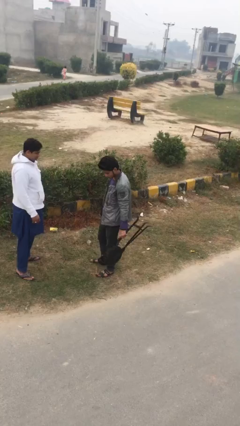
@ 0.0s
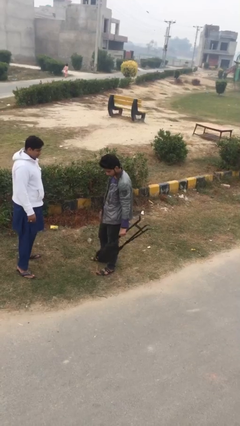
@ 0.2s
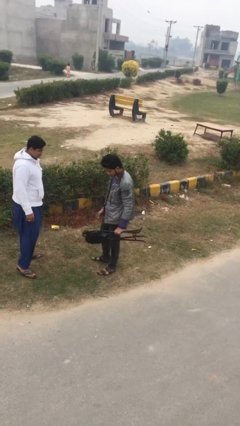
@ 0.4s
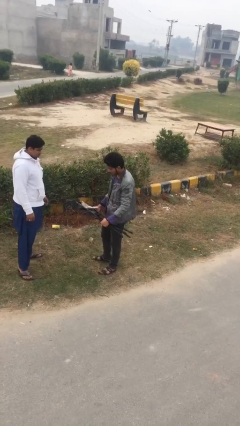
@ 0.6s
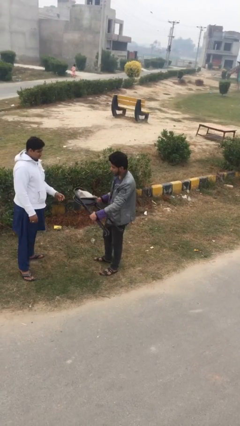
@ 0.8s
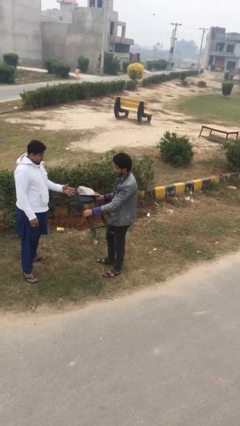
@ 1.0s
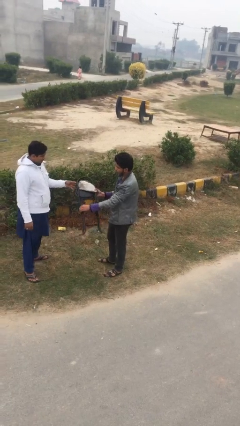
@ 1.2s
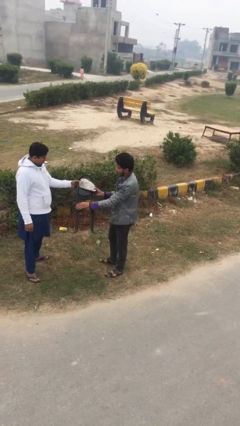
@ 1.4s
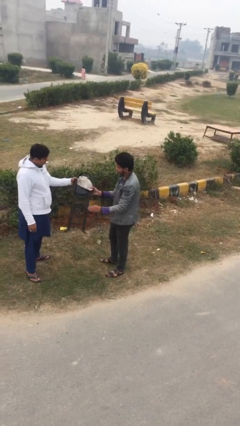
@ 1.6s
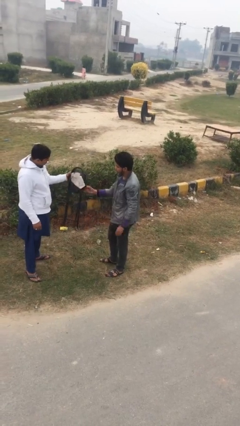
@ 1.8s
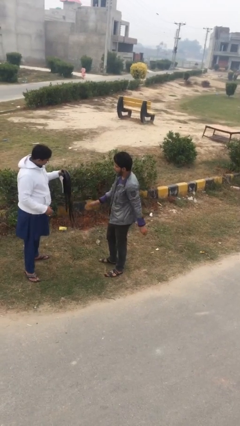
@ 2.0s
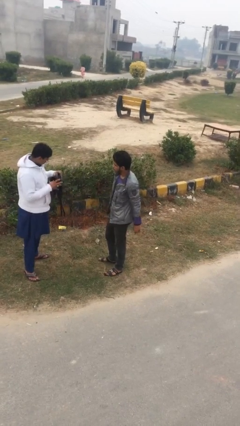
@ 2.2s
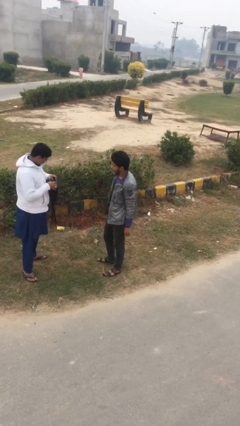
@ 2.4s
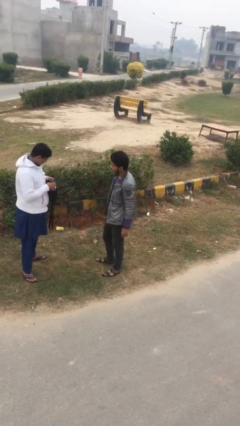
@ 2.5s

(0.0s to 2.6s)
person transfers object to person

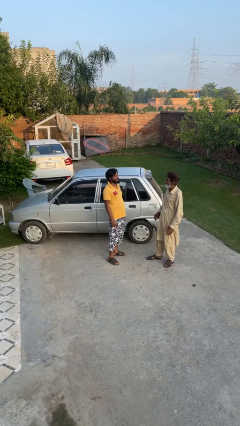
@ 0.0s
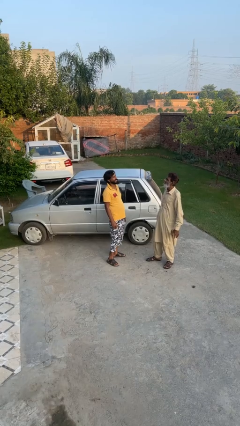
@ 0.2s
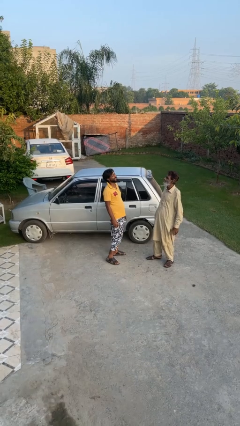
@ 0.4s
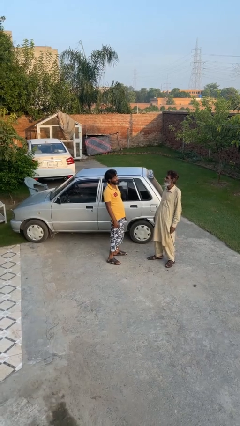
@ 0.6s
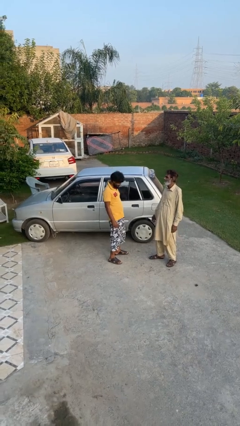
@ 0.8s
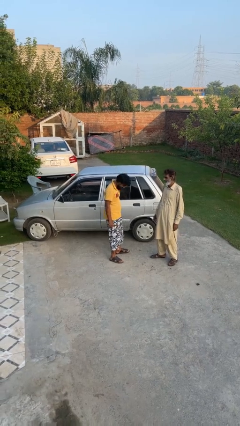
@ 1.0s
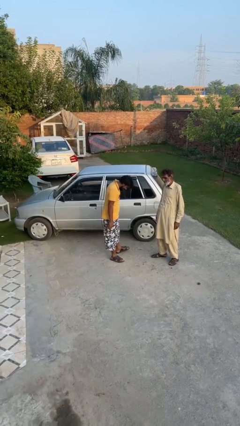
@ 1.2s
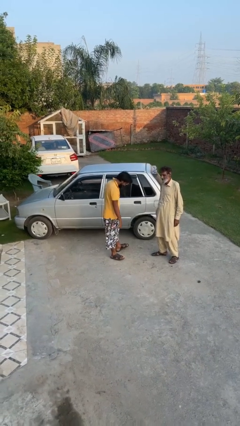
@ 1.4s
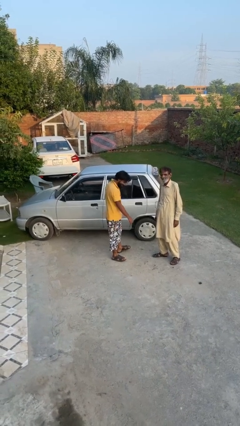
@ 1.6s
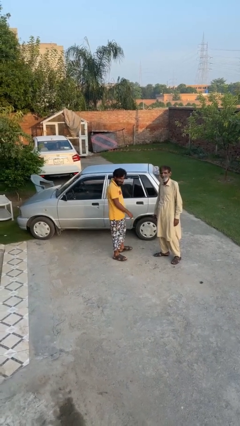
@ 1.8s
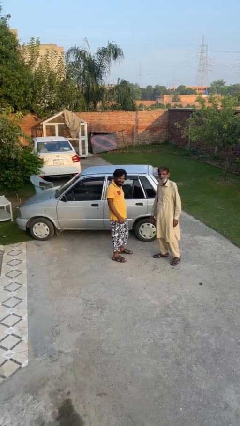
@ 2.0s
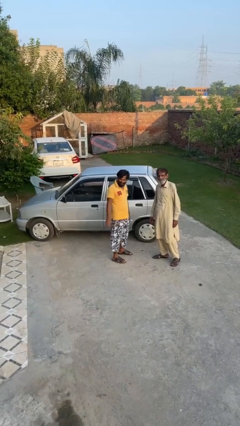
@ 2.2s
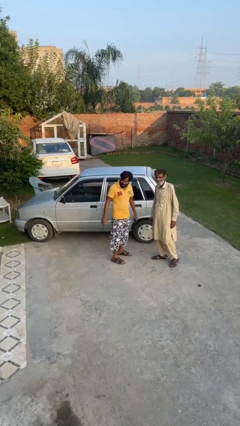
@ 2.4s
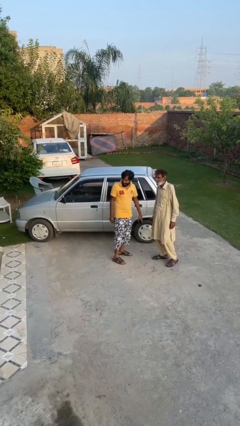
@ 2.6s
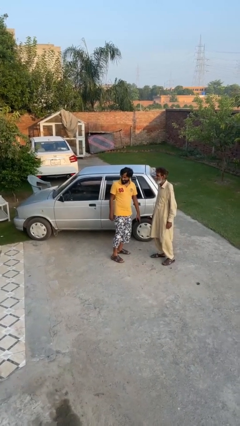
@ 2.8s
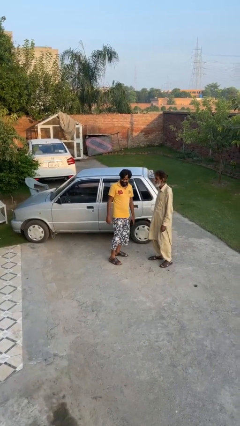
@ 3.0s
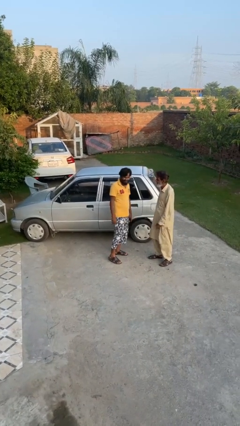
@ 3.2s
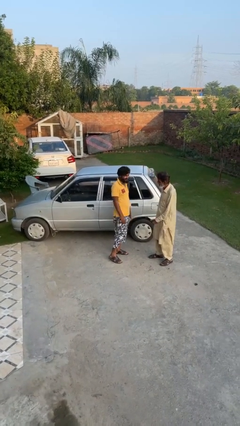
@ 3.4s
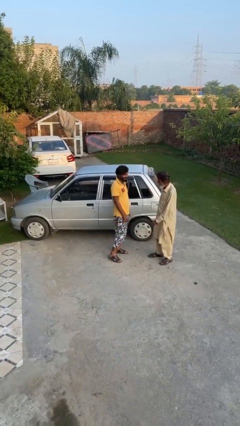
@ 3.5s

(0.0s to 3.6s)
person laughs with person

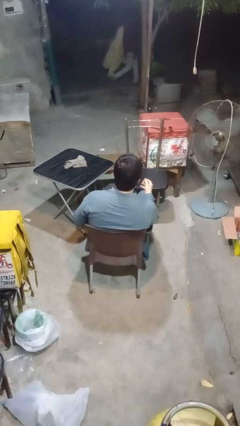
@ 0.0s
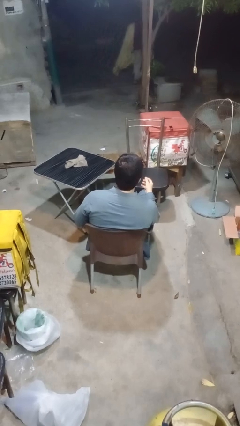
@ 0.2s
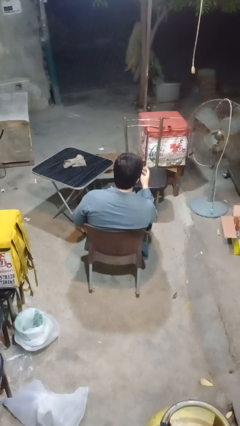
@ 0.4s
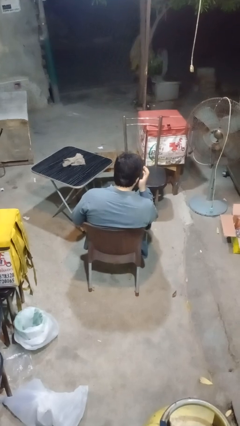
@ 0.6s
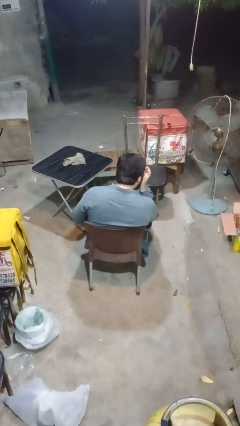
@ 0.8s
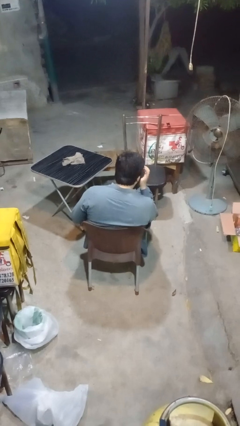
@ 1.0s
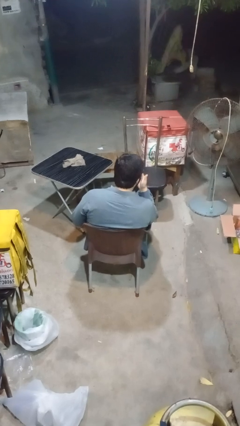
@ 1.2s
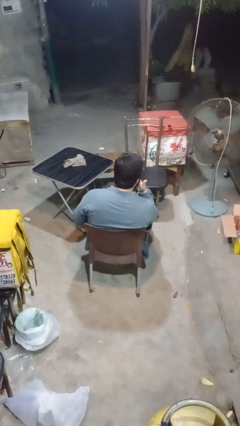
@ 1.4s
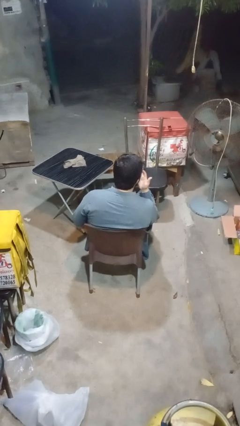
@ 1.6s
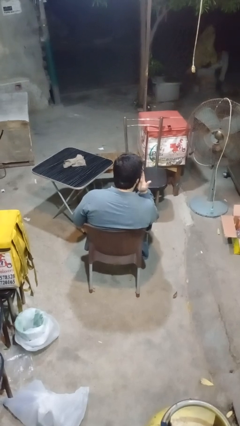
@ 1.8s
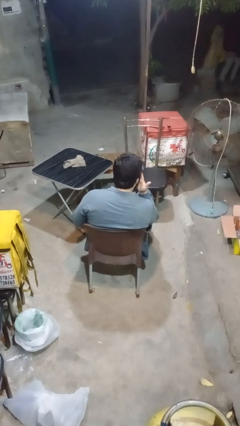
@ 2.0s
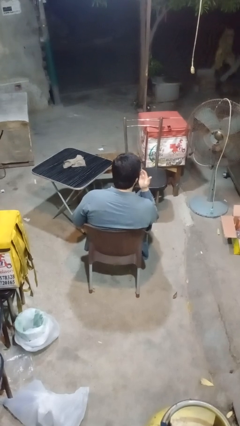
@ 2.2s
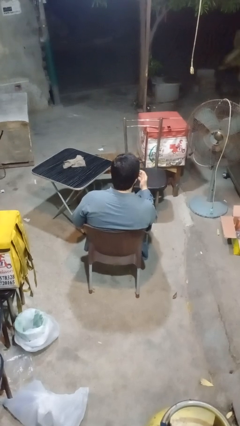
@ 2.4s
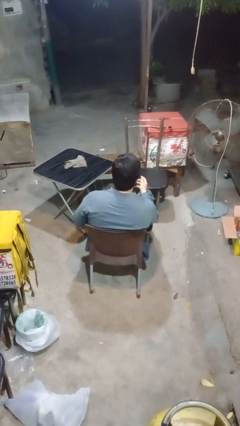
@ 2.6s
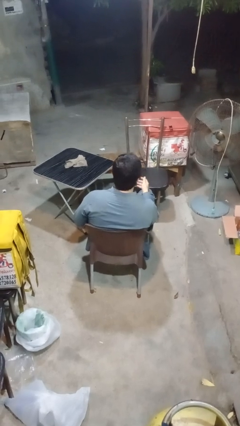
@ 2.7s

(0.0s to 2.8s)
person licks fingers

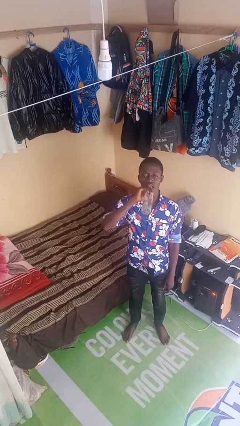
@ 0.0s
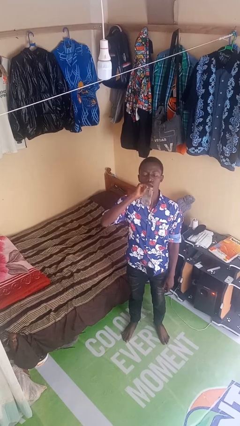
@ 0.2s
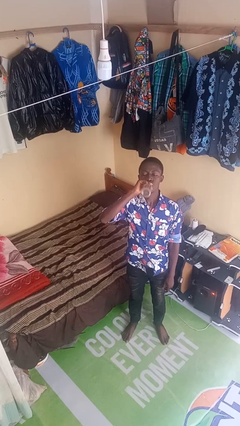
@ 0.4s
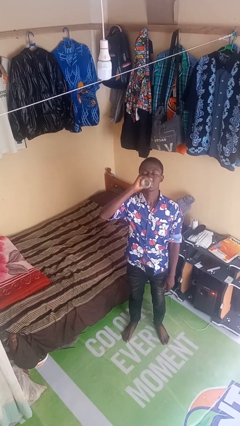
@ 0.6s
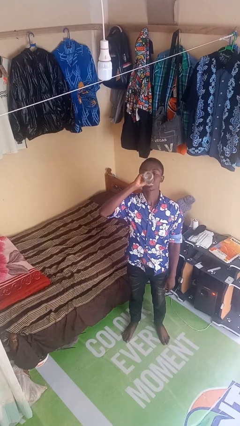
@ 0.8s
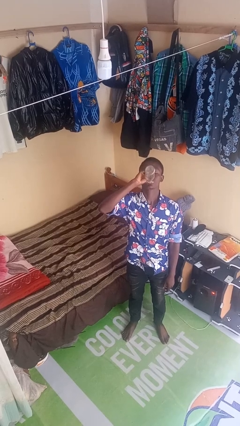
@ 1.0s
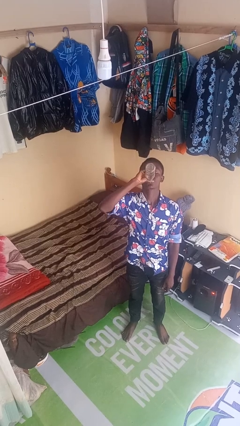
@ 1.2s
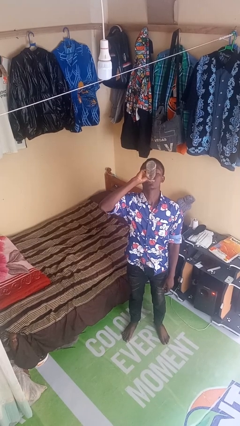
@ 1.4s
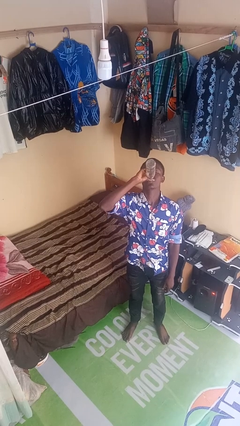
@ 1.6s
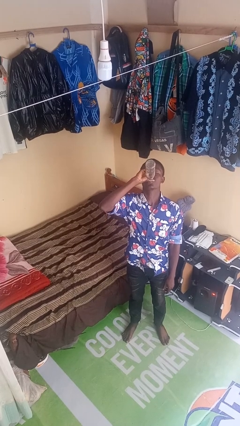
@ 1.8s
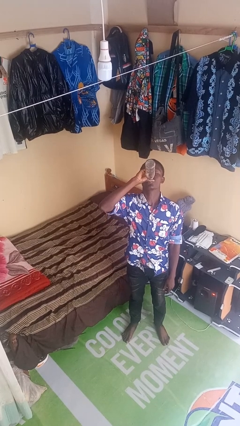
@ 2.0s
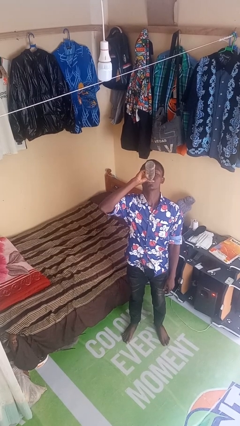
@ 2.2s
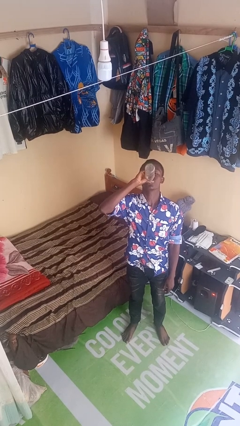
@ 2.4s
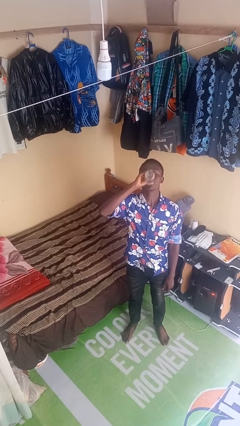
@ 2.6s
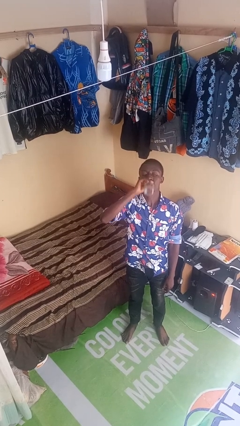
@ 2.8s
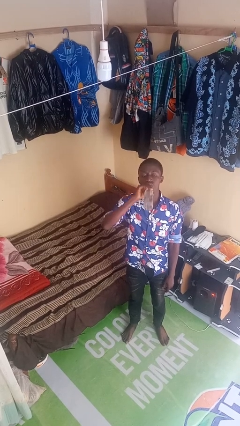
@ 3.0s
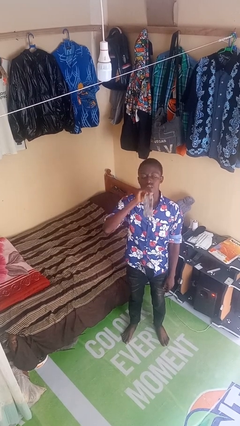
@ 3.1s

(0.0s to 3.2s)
person drinks from bottle

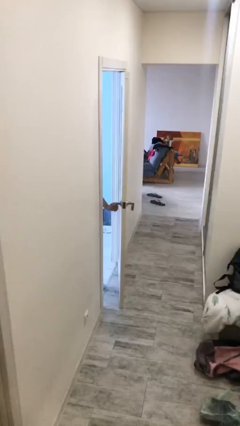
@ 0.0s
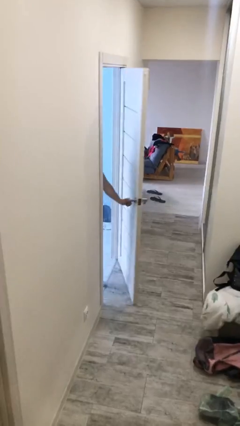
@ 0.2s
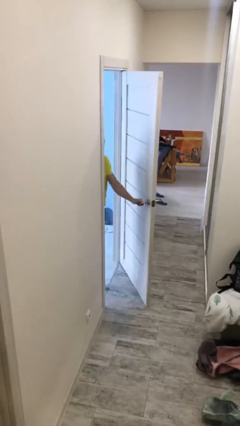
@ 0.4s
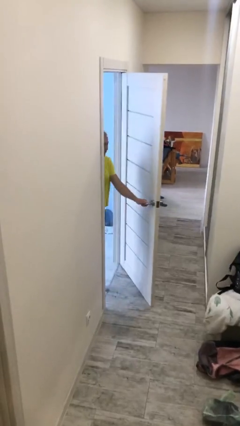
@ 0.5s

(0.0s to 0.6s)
person opens facility door

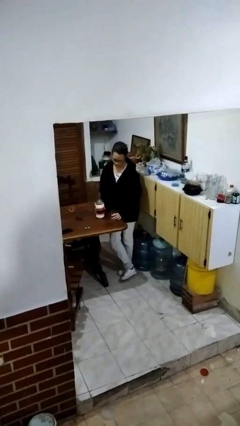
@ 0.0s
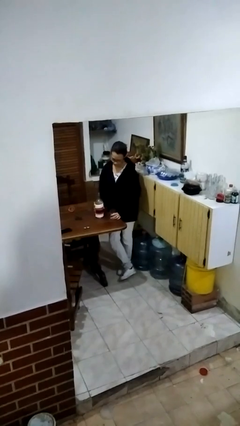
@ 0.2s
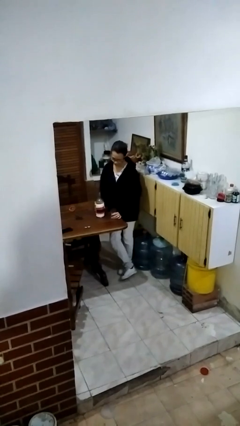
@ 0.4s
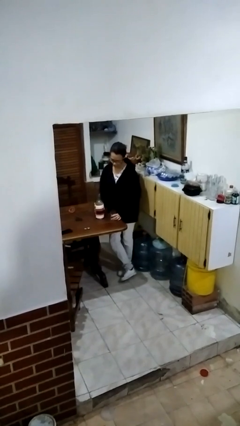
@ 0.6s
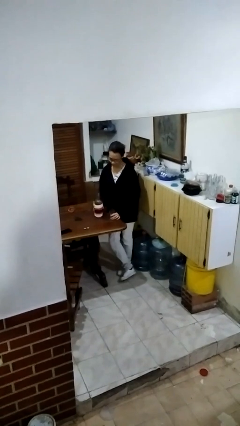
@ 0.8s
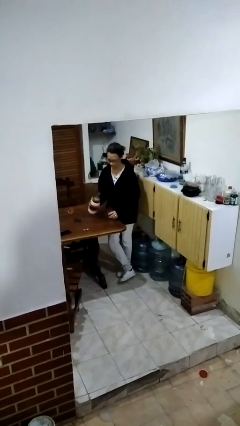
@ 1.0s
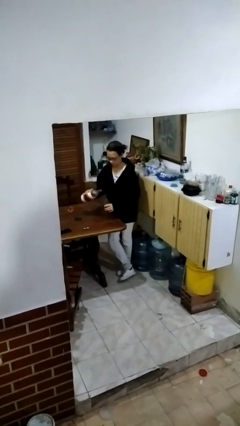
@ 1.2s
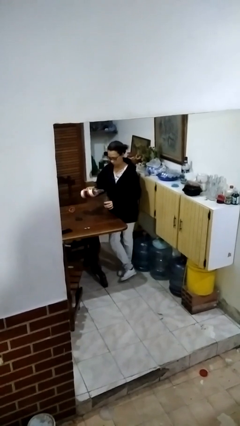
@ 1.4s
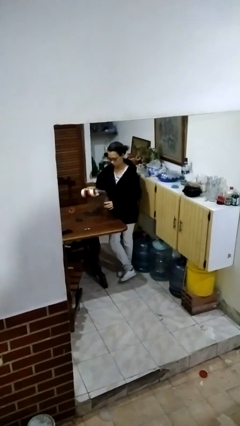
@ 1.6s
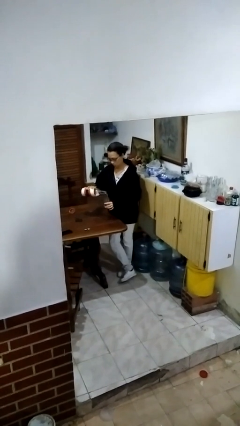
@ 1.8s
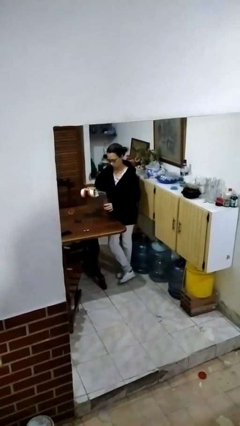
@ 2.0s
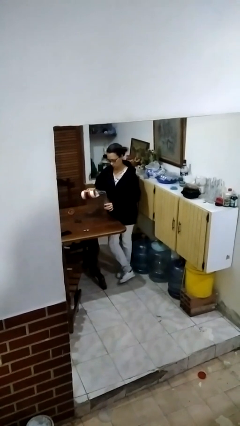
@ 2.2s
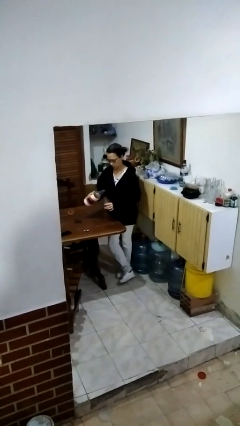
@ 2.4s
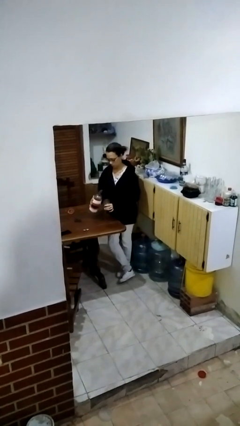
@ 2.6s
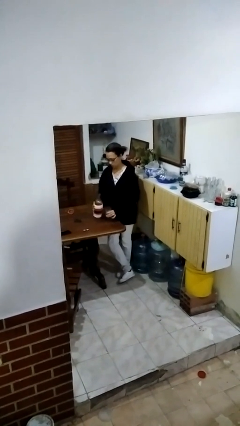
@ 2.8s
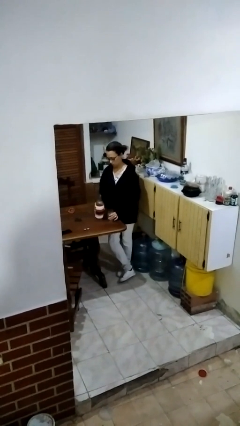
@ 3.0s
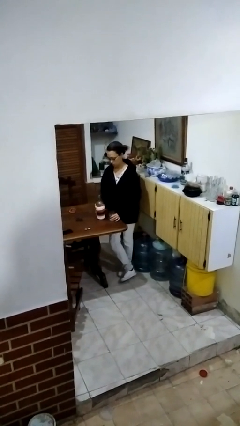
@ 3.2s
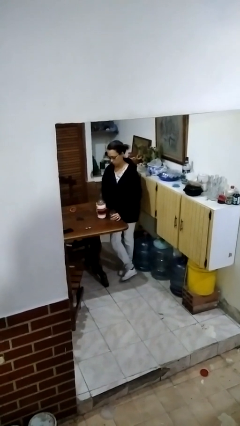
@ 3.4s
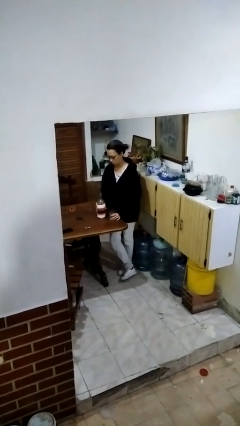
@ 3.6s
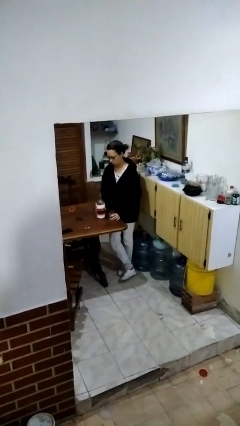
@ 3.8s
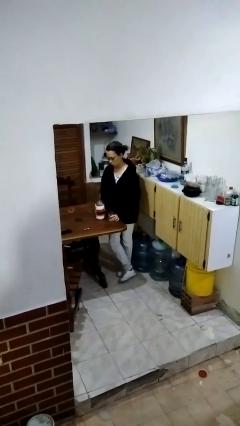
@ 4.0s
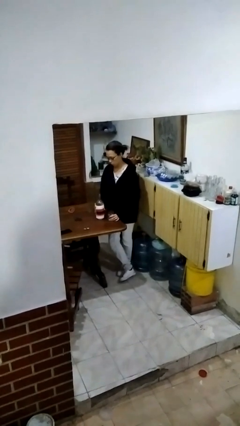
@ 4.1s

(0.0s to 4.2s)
person pours liquid into cup

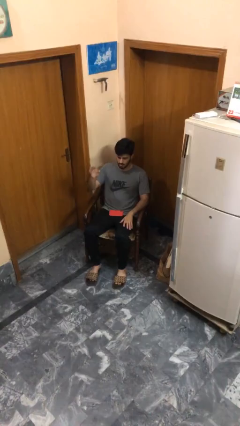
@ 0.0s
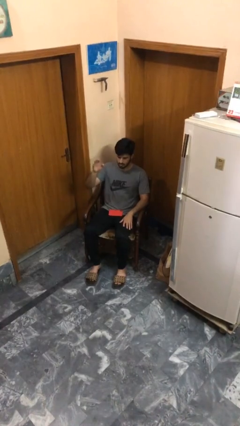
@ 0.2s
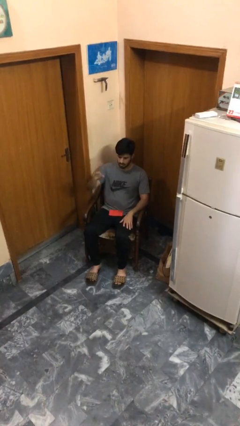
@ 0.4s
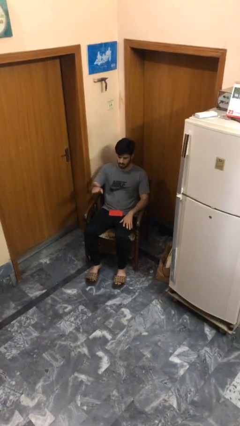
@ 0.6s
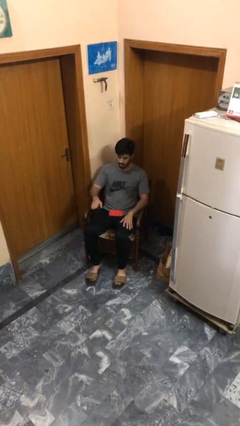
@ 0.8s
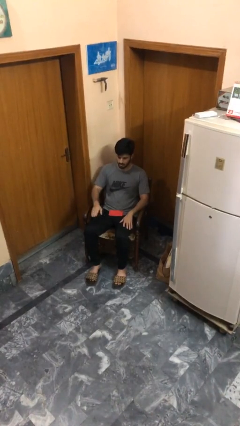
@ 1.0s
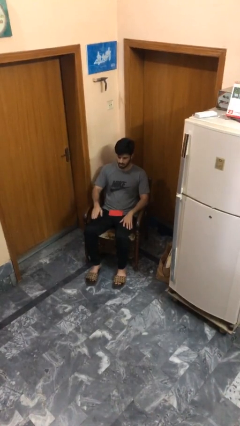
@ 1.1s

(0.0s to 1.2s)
person gestures swipe down
